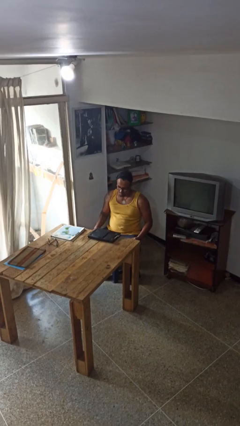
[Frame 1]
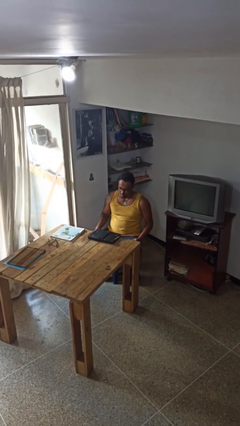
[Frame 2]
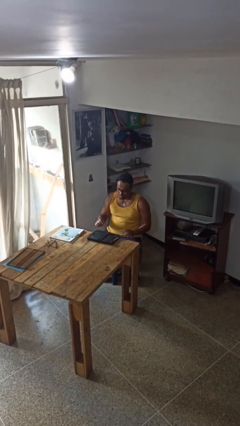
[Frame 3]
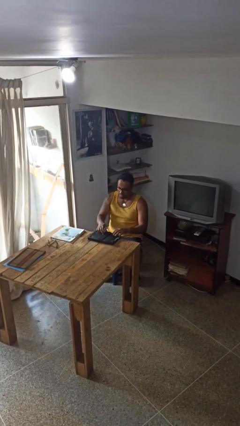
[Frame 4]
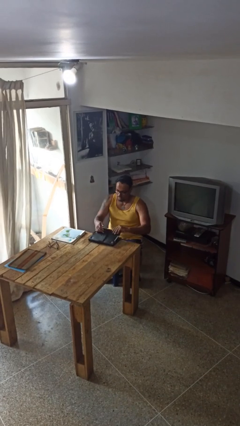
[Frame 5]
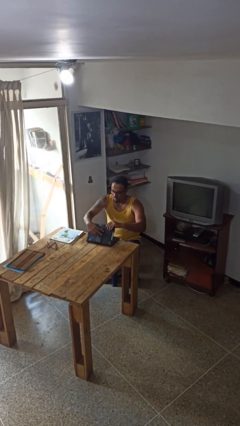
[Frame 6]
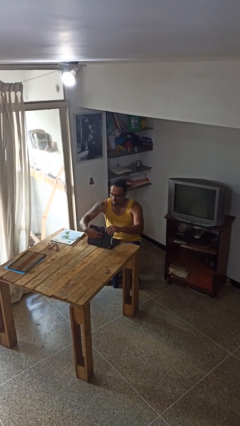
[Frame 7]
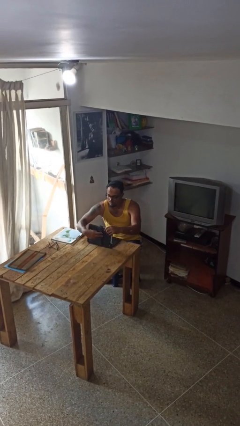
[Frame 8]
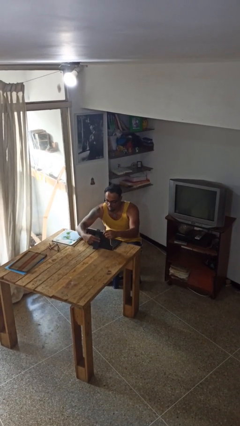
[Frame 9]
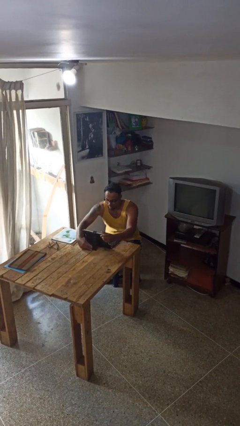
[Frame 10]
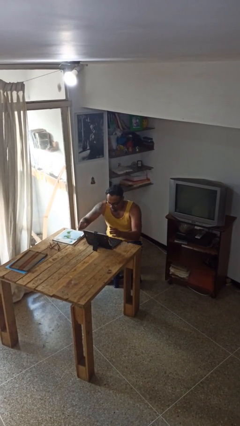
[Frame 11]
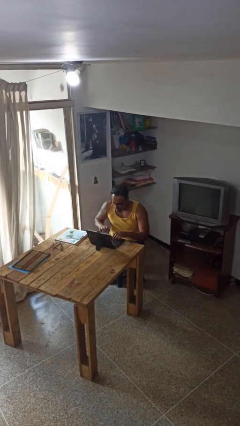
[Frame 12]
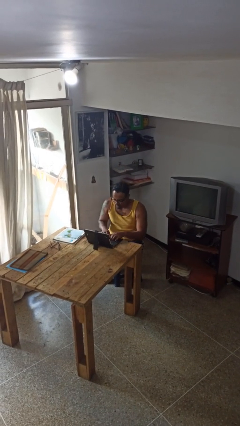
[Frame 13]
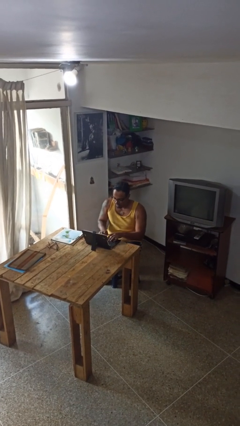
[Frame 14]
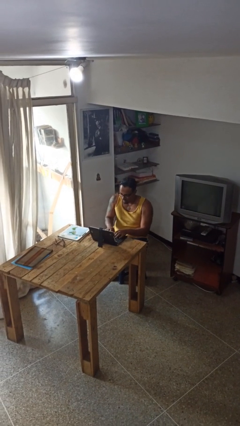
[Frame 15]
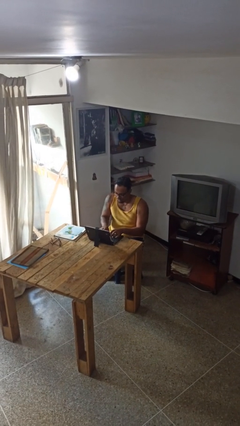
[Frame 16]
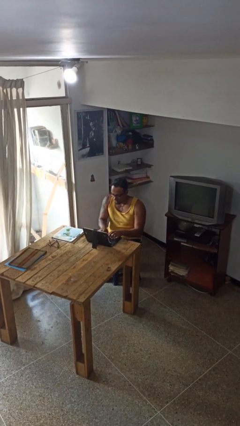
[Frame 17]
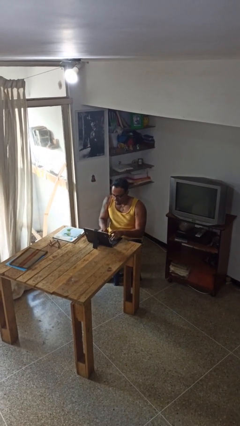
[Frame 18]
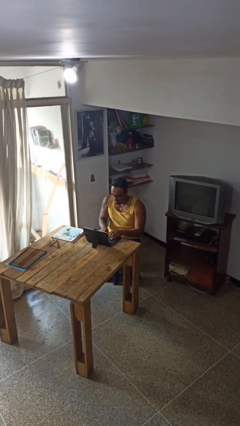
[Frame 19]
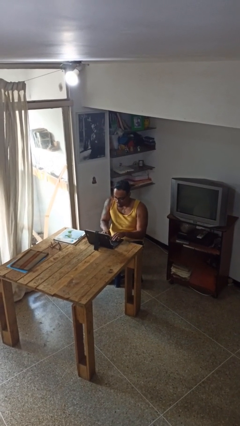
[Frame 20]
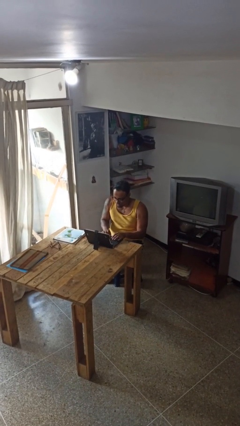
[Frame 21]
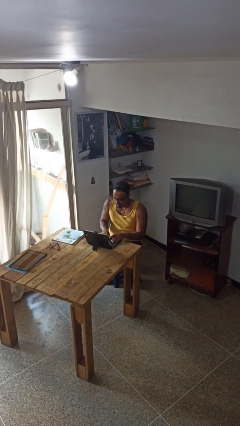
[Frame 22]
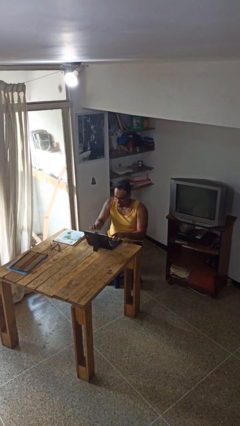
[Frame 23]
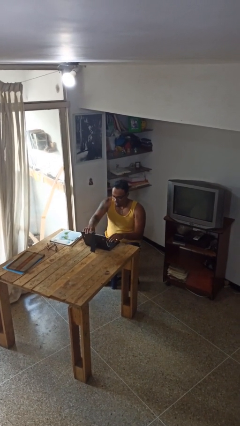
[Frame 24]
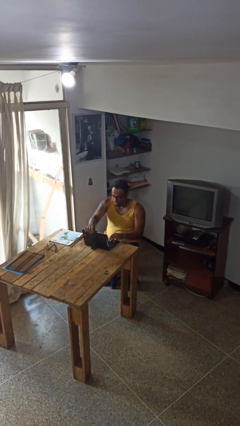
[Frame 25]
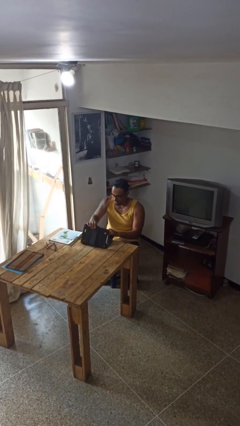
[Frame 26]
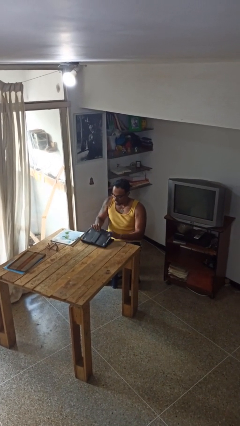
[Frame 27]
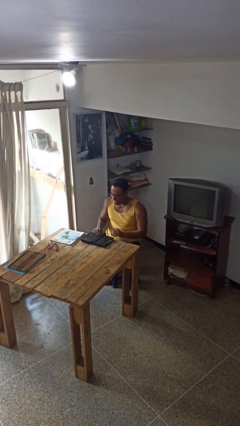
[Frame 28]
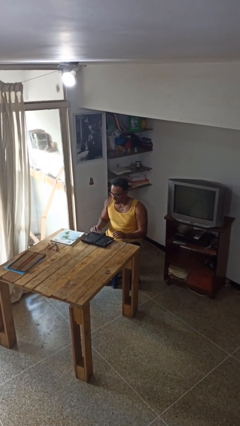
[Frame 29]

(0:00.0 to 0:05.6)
person interacts with laptop

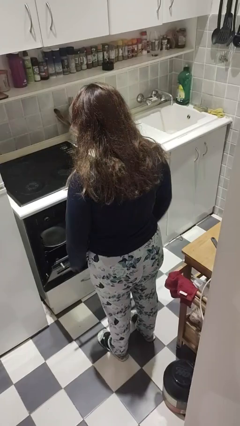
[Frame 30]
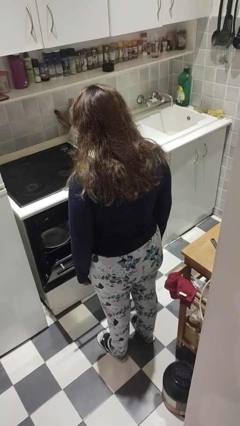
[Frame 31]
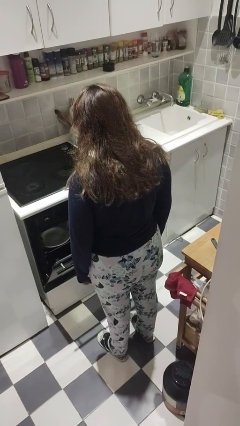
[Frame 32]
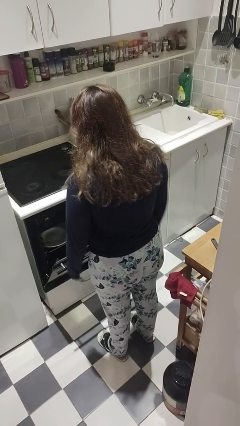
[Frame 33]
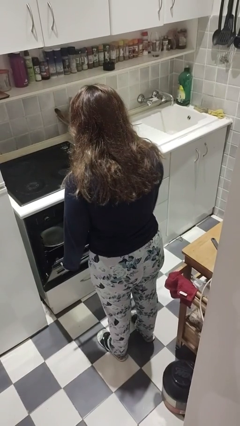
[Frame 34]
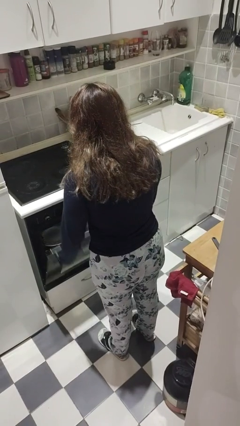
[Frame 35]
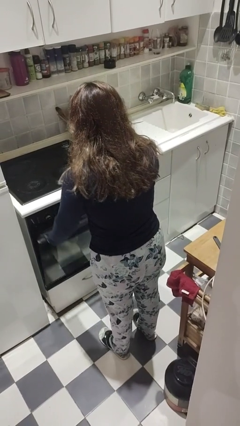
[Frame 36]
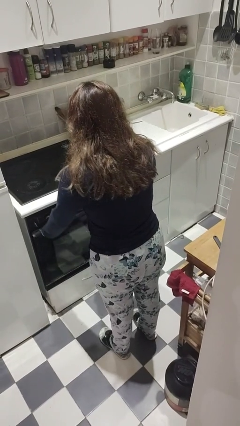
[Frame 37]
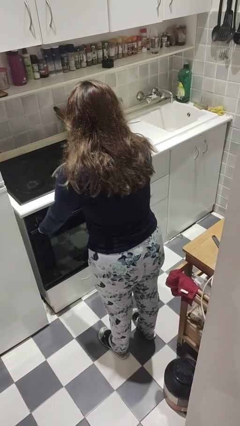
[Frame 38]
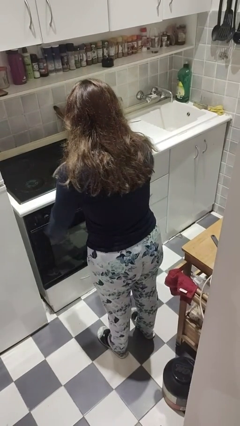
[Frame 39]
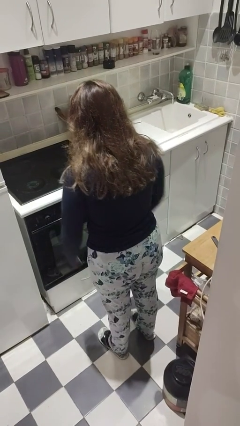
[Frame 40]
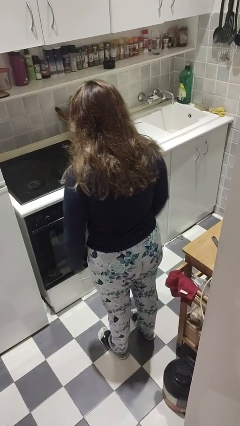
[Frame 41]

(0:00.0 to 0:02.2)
person closes dishwasher

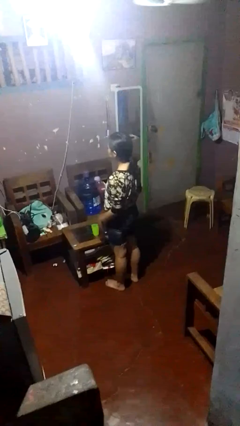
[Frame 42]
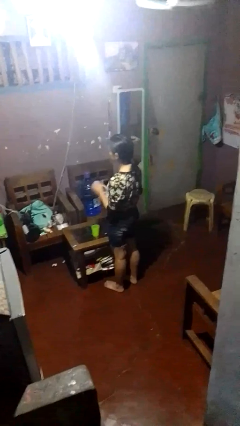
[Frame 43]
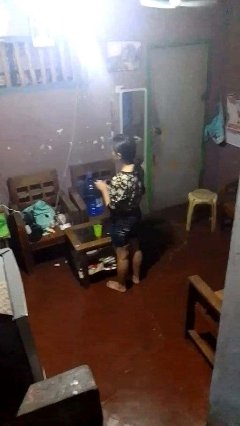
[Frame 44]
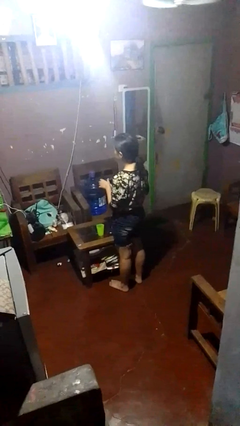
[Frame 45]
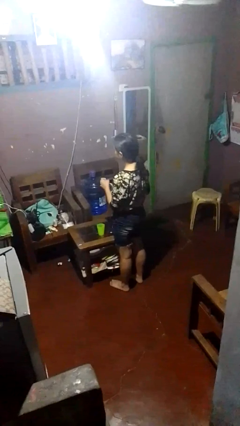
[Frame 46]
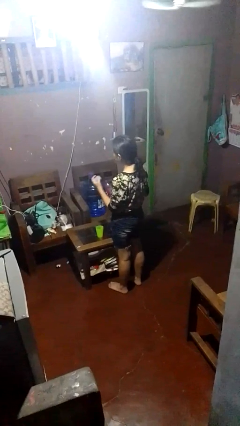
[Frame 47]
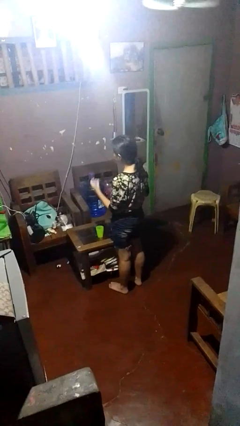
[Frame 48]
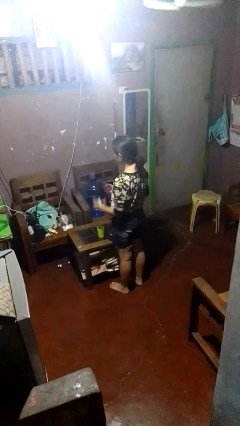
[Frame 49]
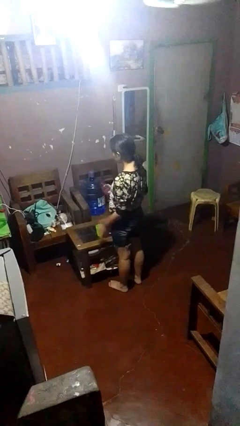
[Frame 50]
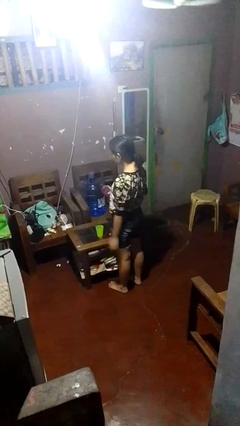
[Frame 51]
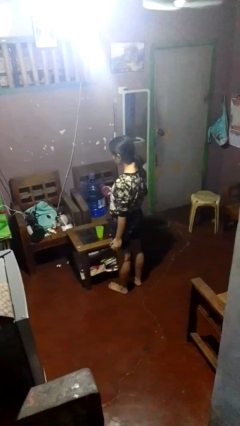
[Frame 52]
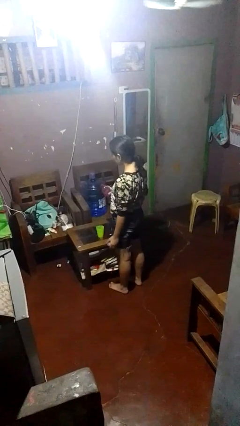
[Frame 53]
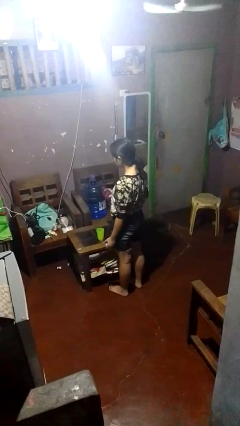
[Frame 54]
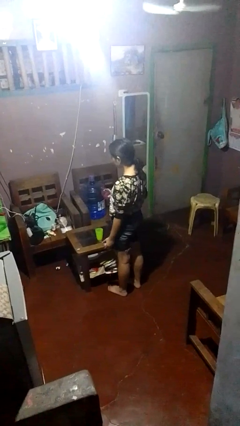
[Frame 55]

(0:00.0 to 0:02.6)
person unscrews lid from bottle

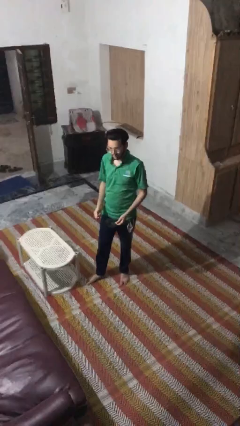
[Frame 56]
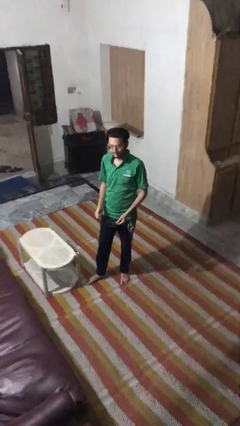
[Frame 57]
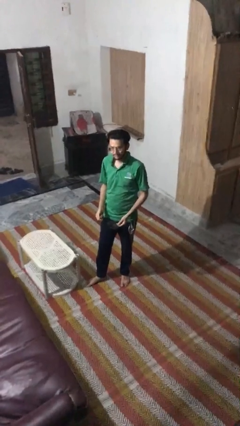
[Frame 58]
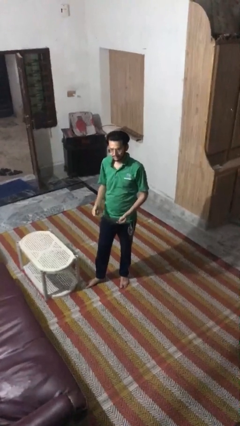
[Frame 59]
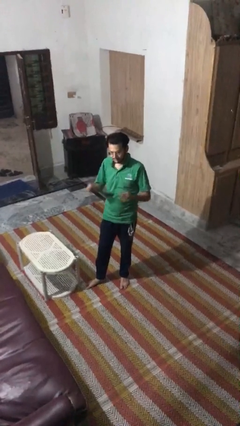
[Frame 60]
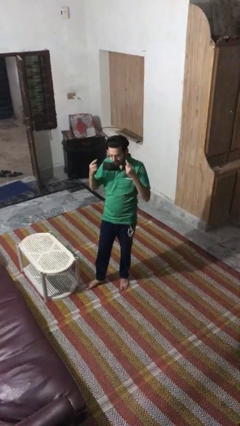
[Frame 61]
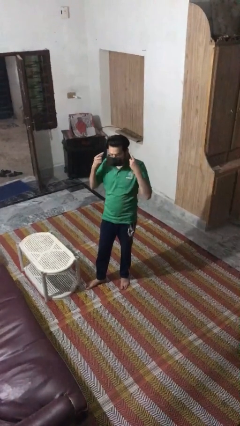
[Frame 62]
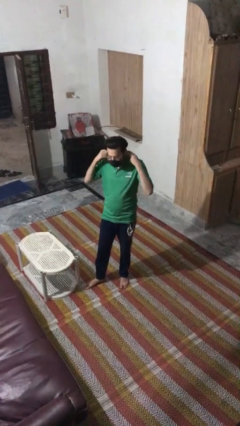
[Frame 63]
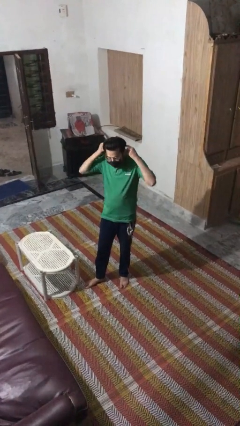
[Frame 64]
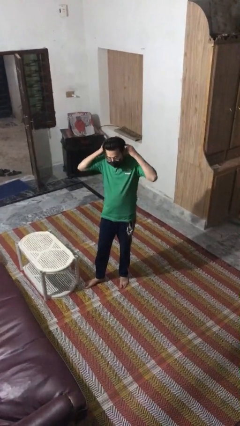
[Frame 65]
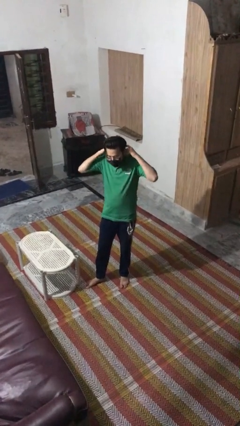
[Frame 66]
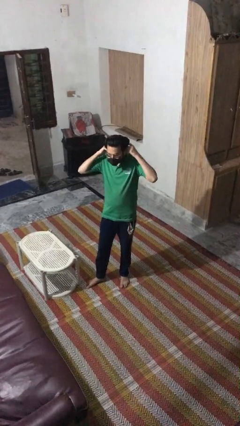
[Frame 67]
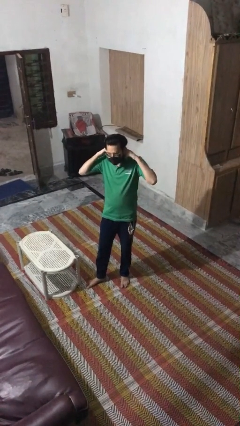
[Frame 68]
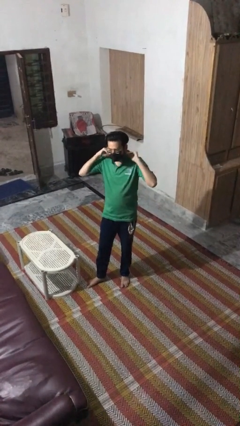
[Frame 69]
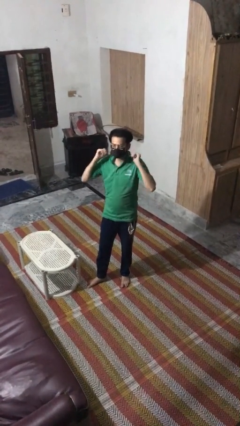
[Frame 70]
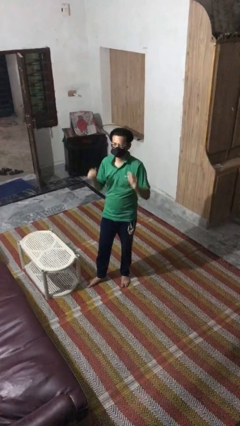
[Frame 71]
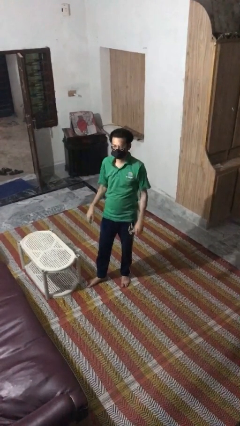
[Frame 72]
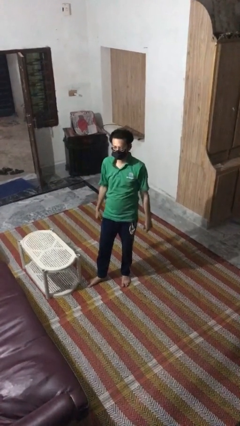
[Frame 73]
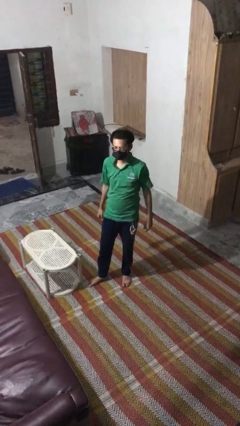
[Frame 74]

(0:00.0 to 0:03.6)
person puts on facemask

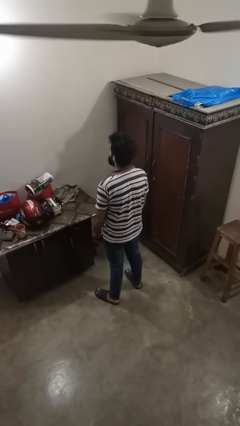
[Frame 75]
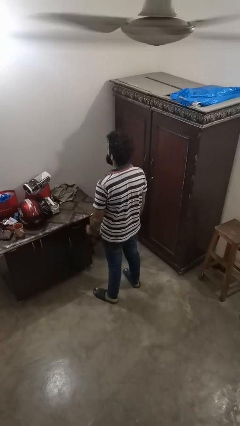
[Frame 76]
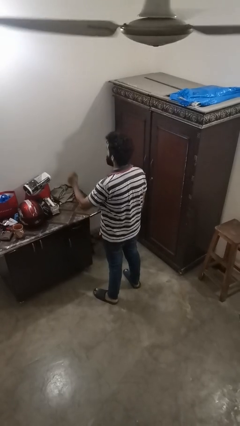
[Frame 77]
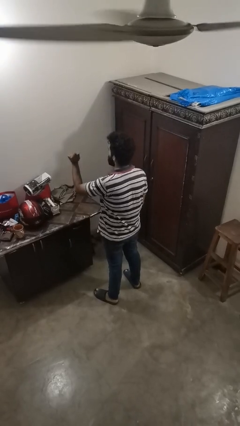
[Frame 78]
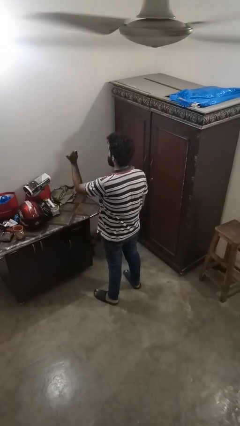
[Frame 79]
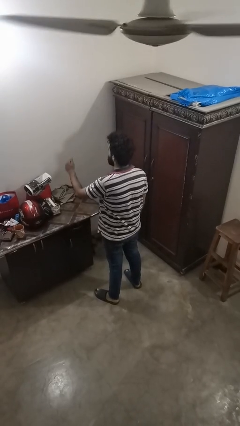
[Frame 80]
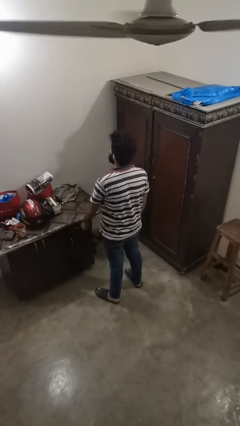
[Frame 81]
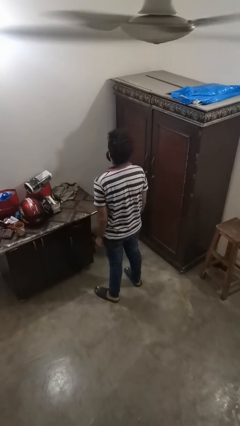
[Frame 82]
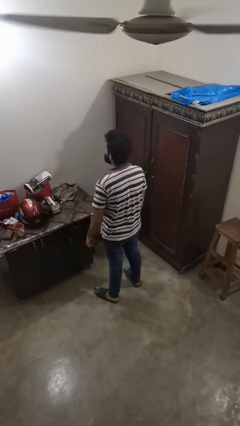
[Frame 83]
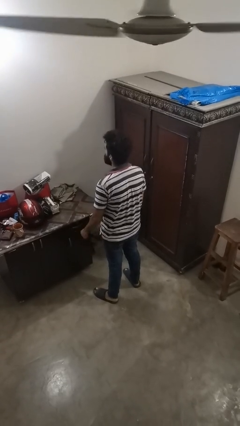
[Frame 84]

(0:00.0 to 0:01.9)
person snaps fingers

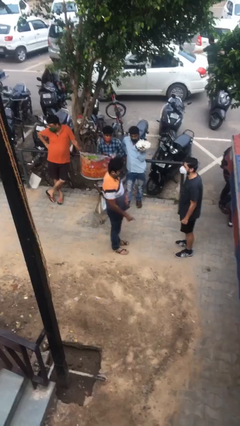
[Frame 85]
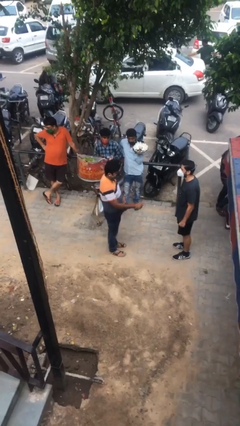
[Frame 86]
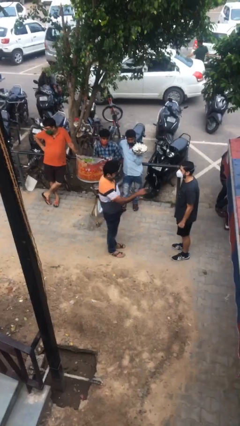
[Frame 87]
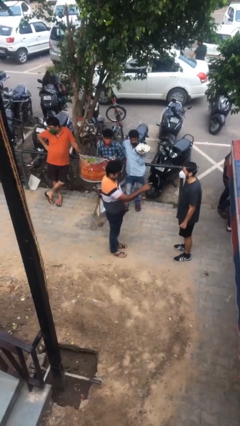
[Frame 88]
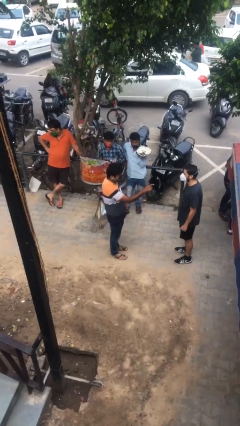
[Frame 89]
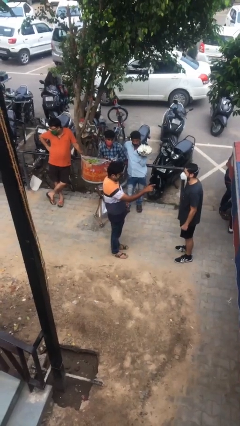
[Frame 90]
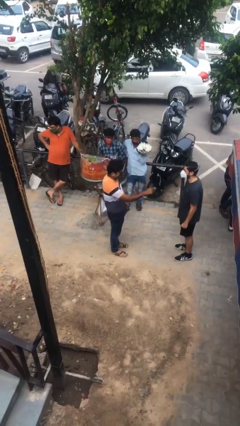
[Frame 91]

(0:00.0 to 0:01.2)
person points at person

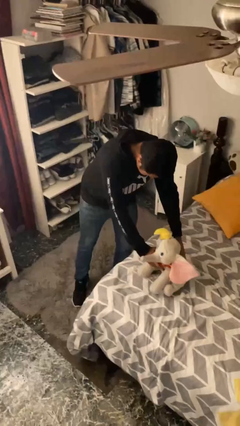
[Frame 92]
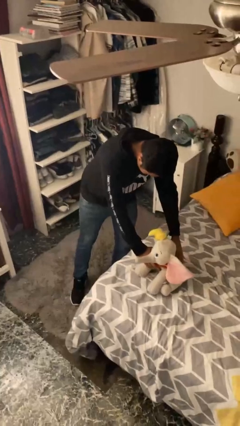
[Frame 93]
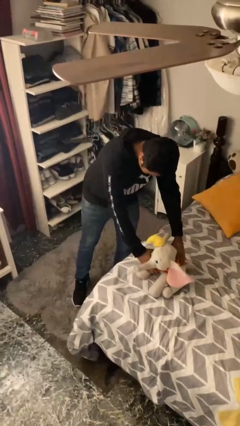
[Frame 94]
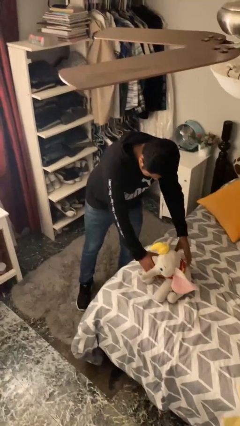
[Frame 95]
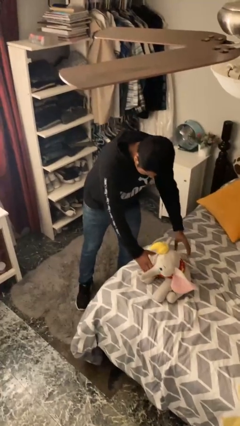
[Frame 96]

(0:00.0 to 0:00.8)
person puts down object on bed
